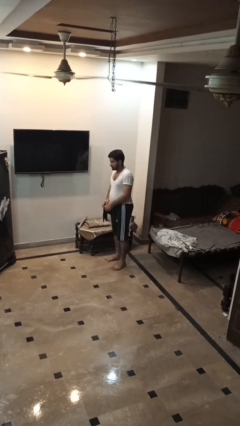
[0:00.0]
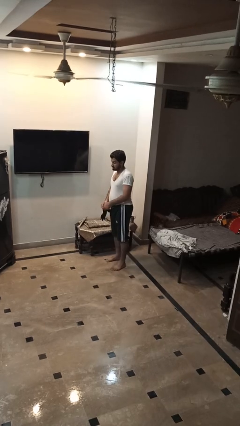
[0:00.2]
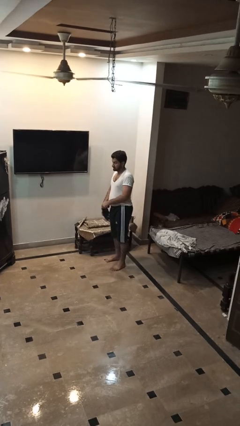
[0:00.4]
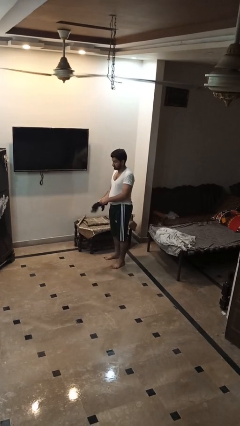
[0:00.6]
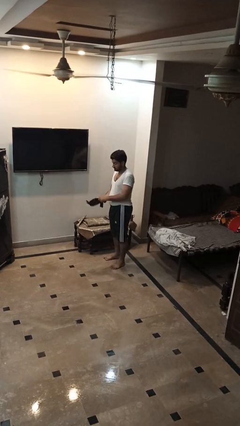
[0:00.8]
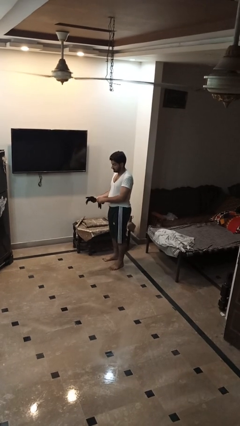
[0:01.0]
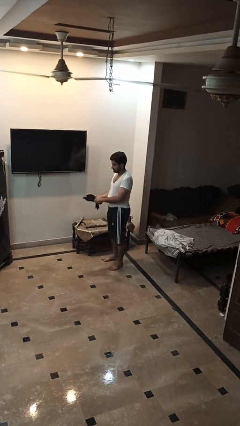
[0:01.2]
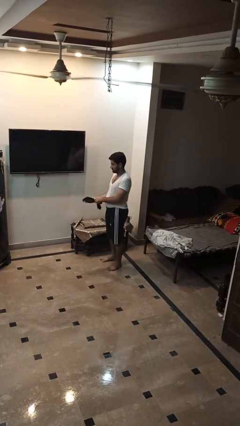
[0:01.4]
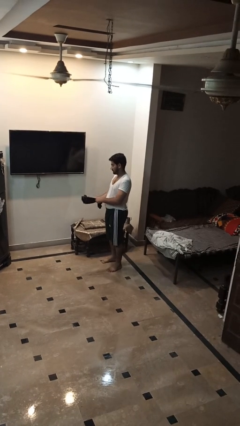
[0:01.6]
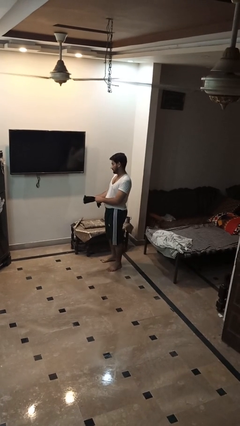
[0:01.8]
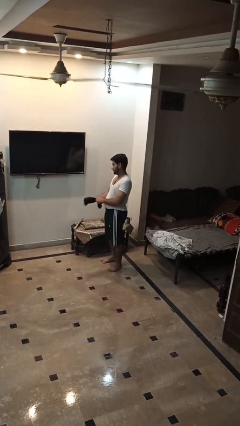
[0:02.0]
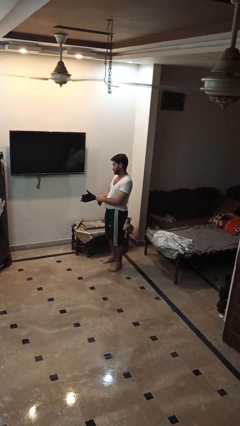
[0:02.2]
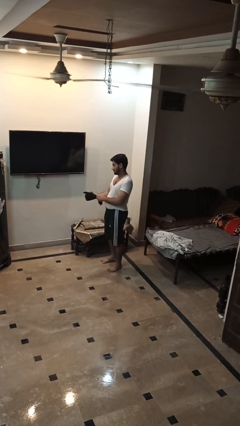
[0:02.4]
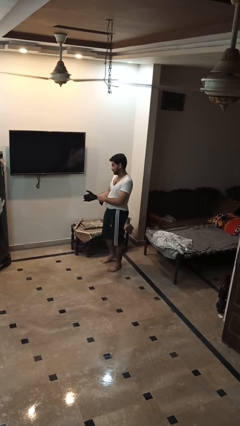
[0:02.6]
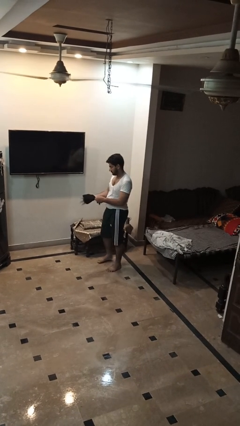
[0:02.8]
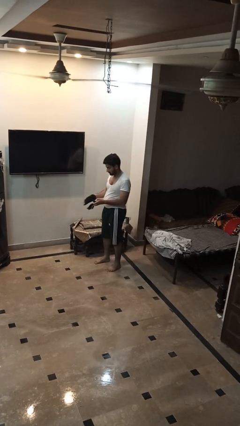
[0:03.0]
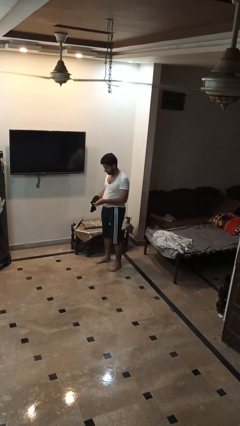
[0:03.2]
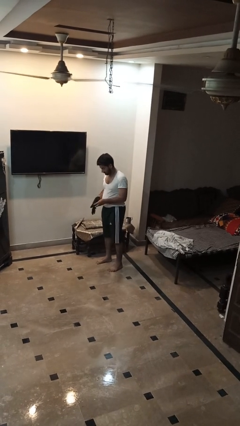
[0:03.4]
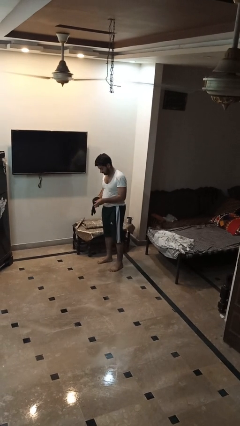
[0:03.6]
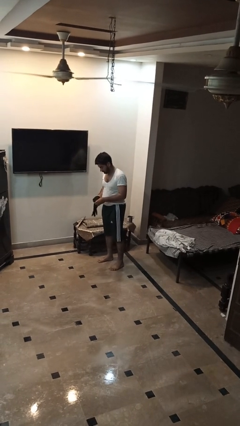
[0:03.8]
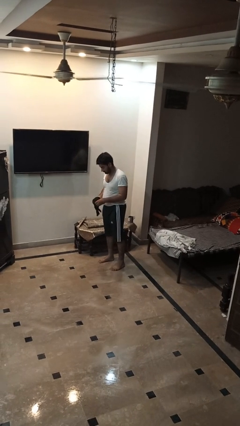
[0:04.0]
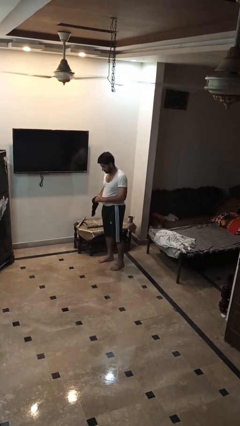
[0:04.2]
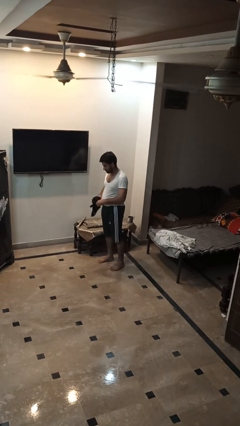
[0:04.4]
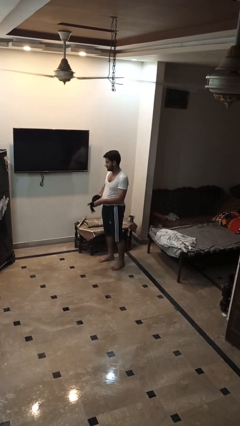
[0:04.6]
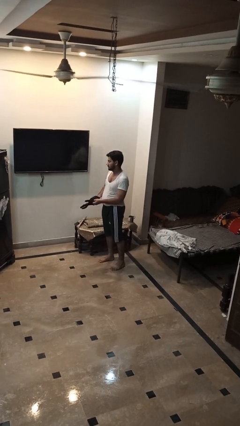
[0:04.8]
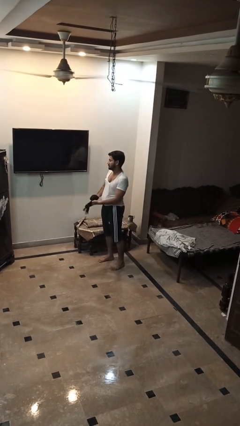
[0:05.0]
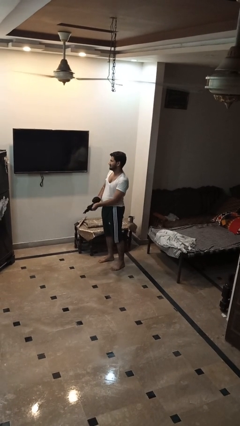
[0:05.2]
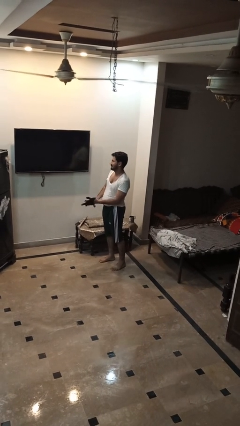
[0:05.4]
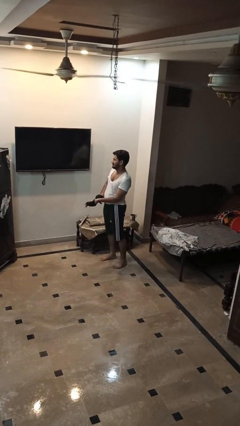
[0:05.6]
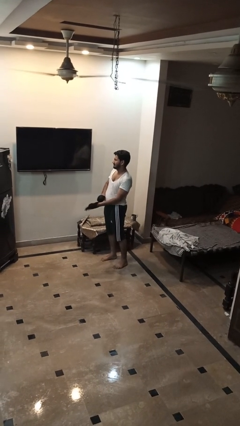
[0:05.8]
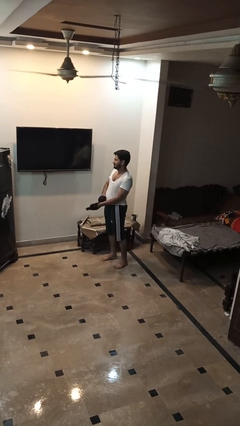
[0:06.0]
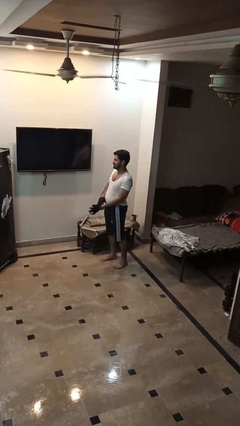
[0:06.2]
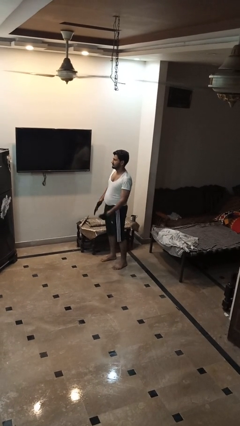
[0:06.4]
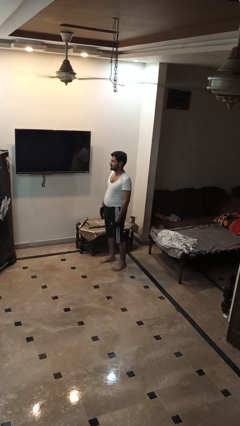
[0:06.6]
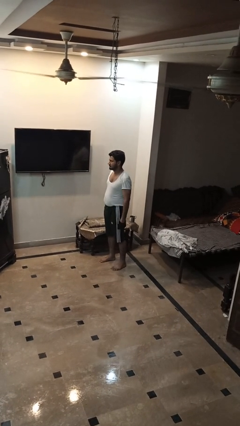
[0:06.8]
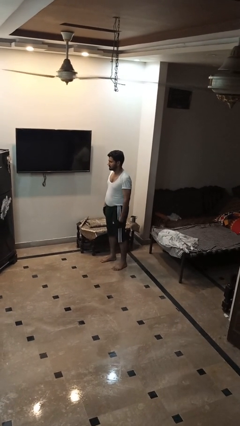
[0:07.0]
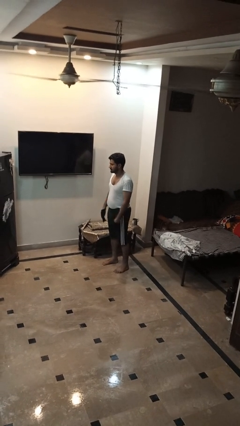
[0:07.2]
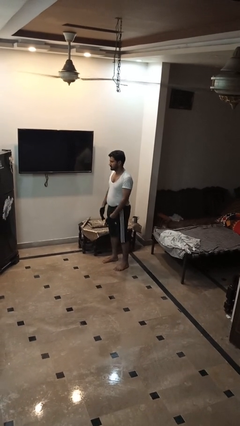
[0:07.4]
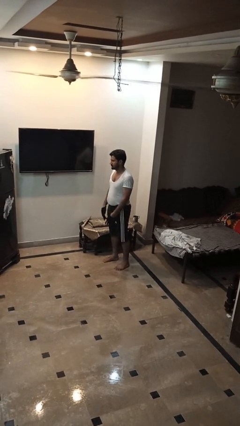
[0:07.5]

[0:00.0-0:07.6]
person puts on gloves

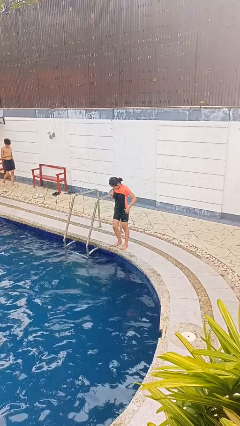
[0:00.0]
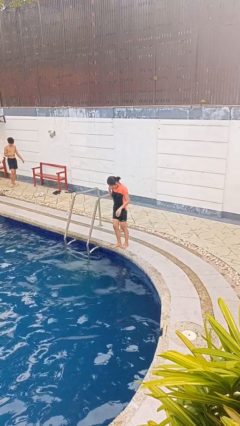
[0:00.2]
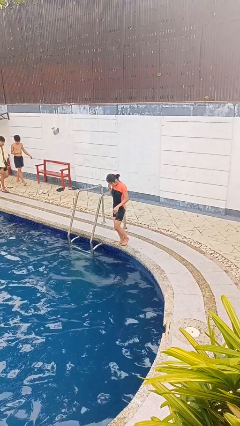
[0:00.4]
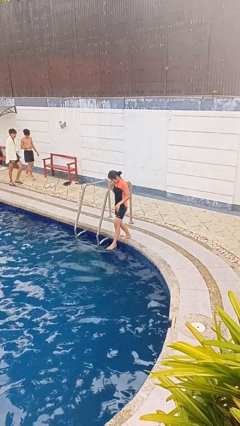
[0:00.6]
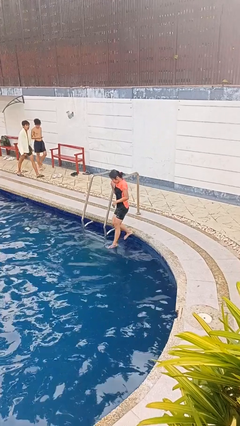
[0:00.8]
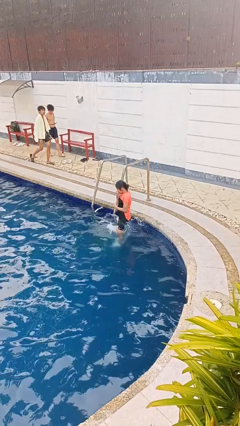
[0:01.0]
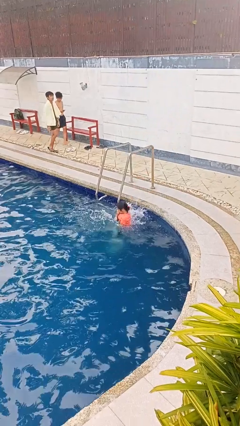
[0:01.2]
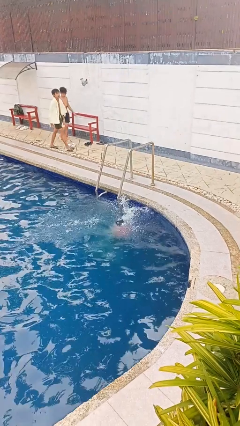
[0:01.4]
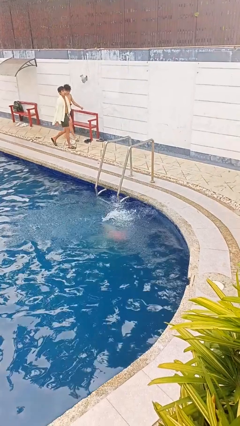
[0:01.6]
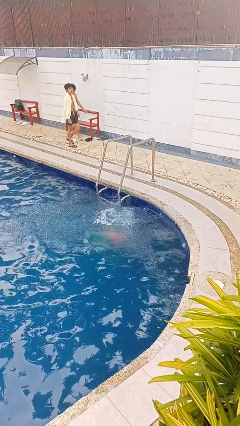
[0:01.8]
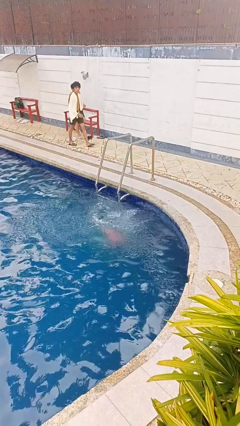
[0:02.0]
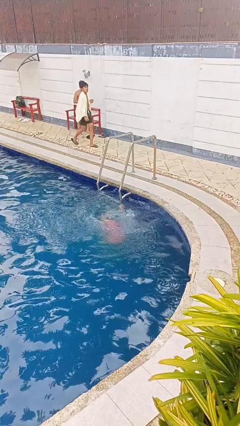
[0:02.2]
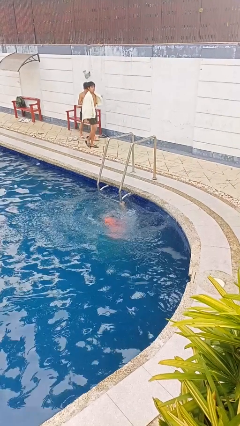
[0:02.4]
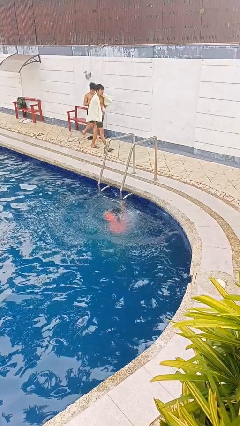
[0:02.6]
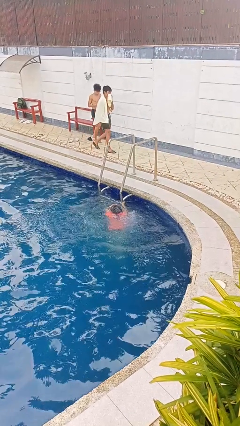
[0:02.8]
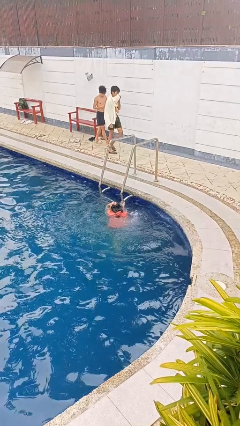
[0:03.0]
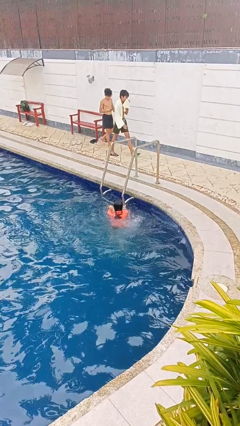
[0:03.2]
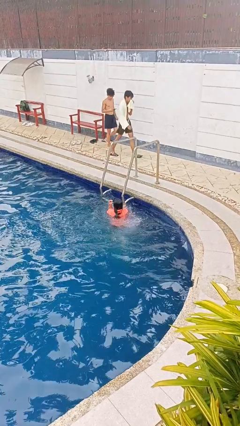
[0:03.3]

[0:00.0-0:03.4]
person jumps into pool

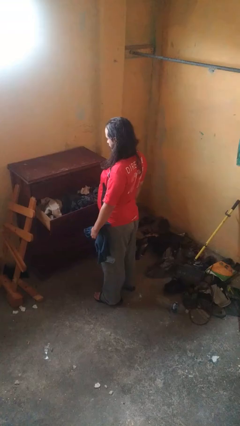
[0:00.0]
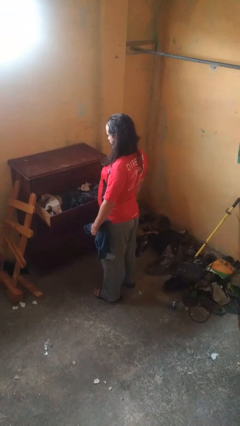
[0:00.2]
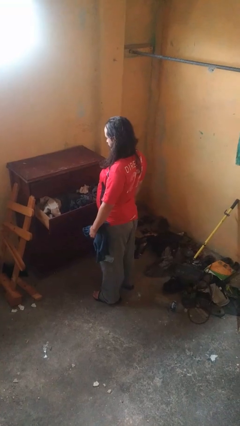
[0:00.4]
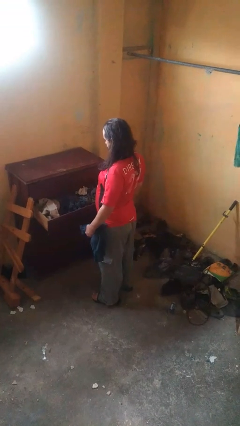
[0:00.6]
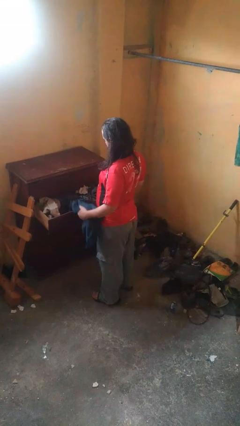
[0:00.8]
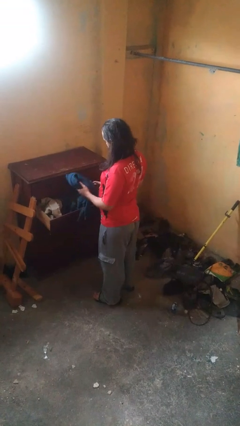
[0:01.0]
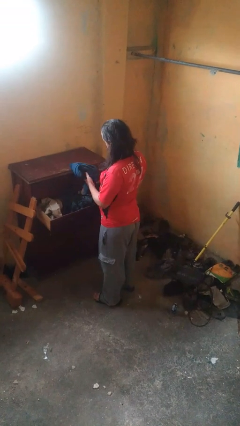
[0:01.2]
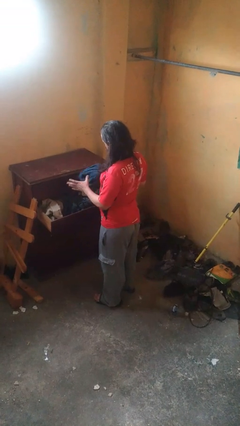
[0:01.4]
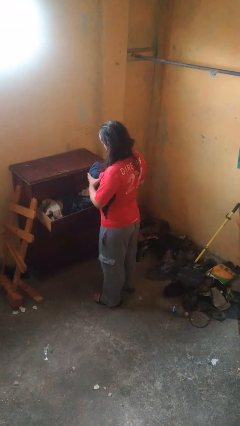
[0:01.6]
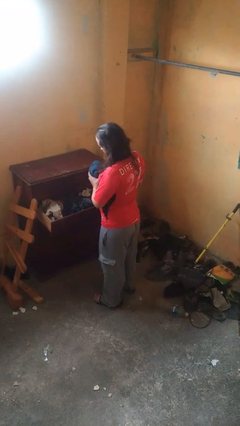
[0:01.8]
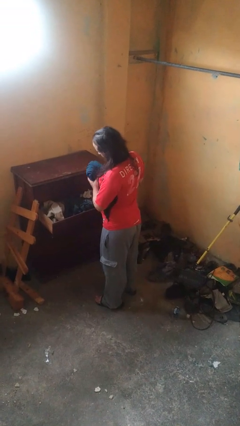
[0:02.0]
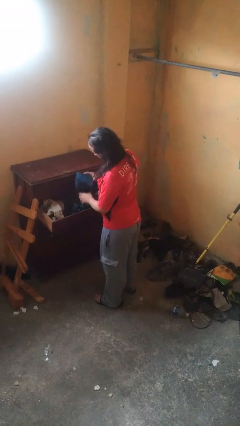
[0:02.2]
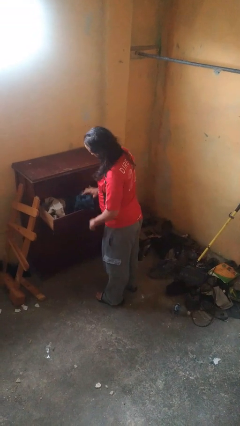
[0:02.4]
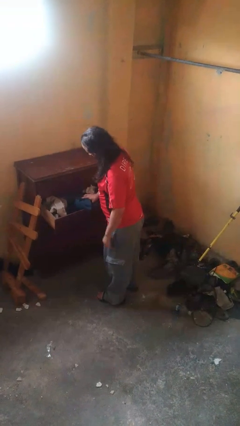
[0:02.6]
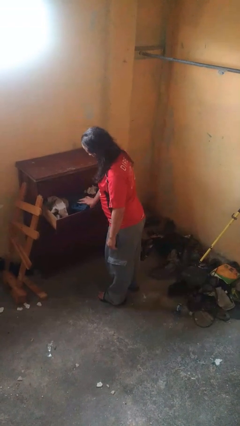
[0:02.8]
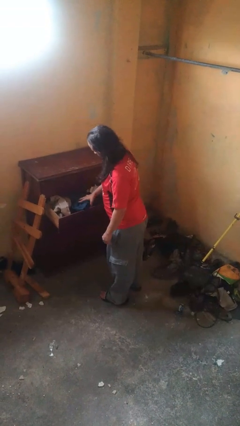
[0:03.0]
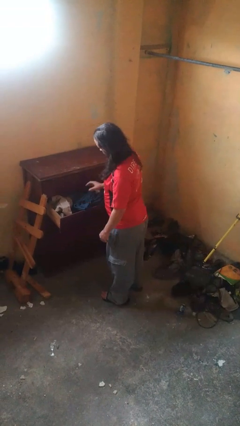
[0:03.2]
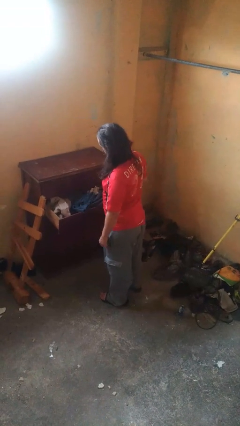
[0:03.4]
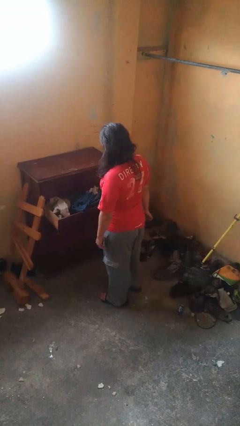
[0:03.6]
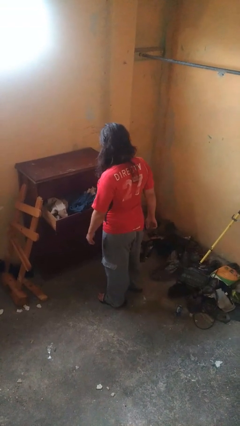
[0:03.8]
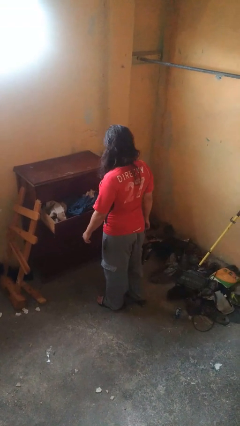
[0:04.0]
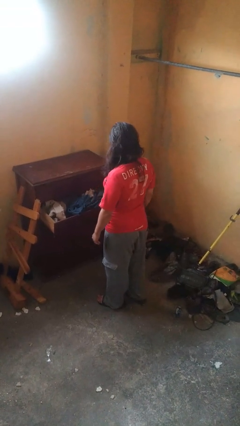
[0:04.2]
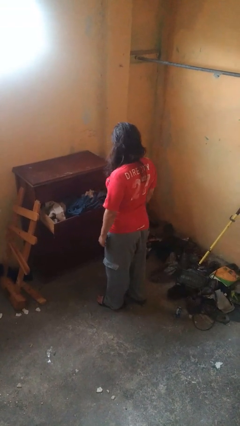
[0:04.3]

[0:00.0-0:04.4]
person puts clothes into dresser

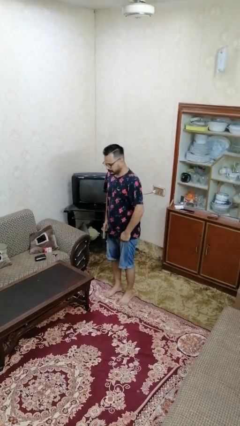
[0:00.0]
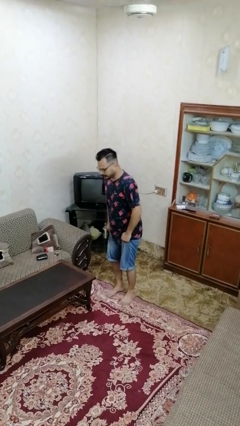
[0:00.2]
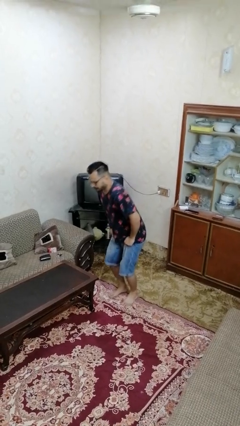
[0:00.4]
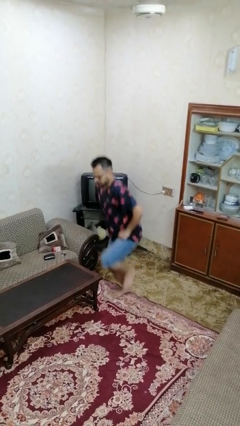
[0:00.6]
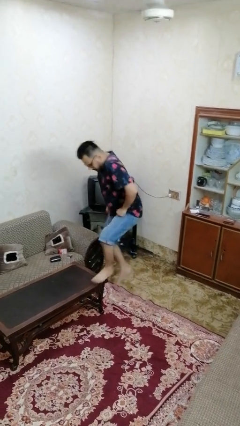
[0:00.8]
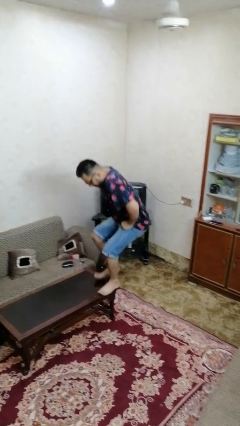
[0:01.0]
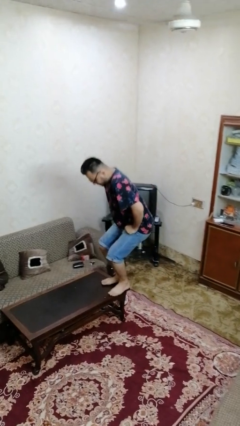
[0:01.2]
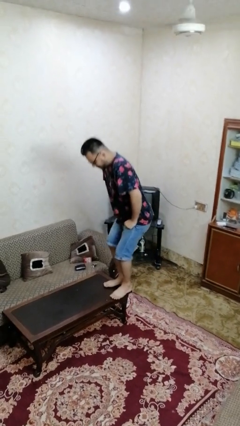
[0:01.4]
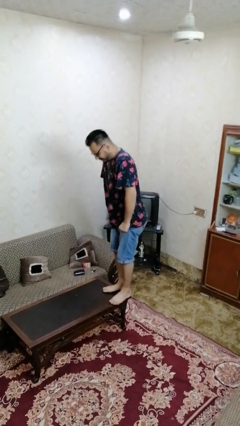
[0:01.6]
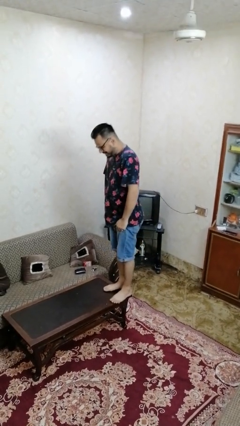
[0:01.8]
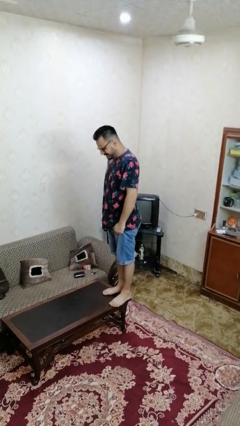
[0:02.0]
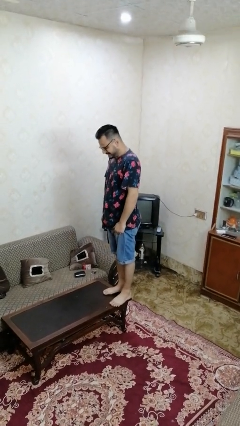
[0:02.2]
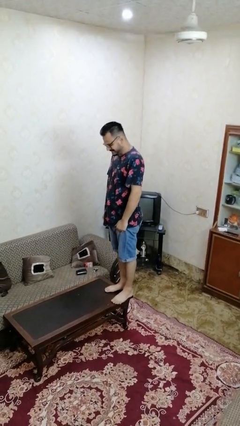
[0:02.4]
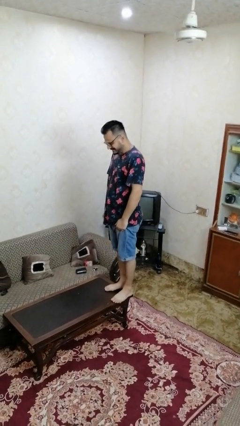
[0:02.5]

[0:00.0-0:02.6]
person climbs on table
